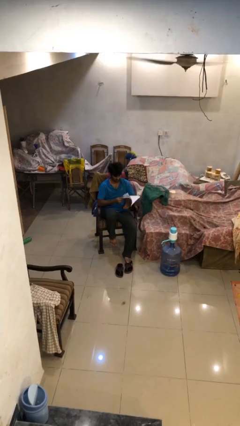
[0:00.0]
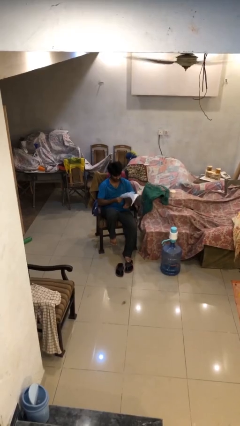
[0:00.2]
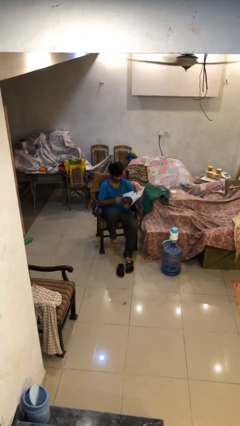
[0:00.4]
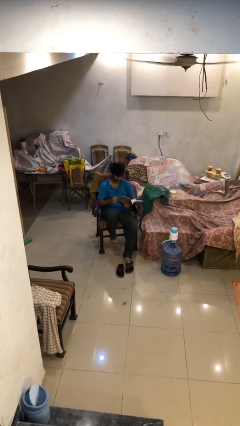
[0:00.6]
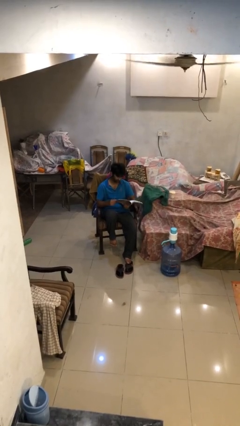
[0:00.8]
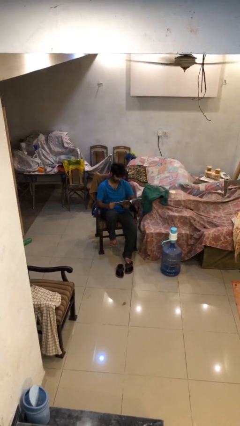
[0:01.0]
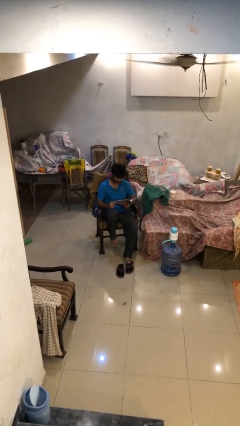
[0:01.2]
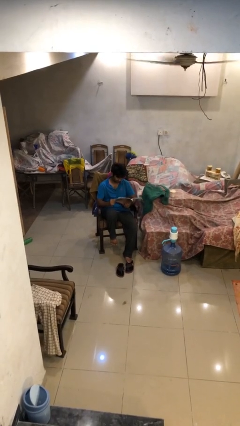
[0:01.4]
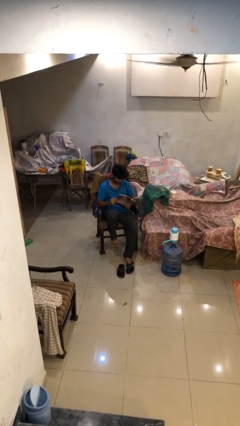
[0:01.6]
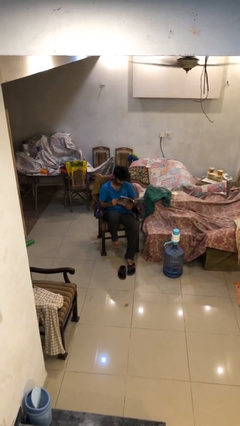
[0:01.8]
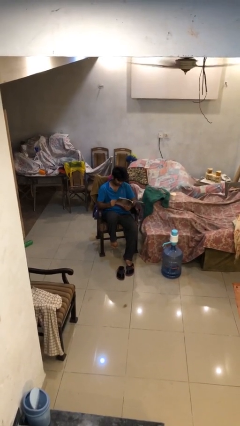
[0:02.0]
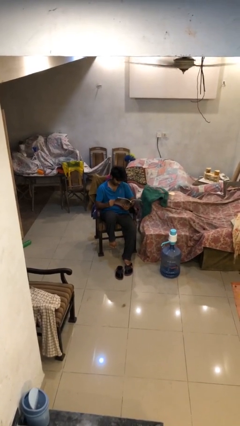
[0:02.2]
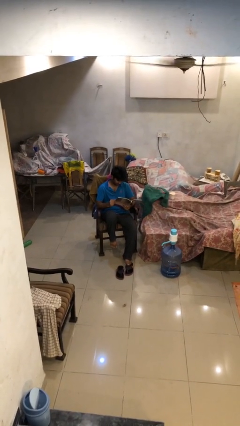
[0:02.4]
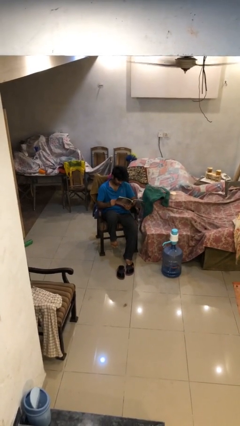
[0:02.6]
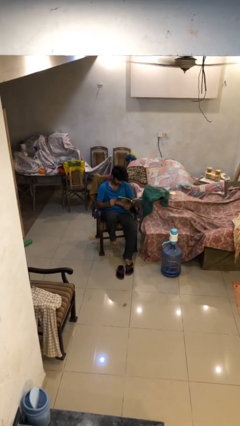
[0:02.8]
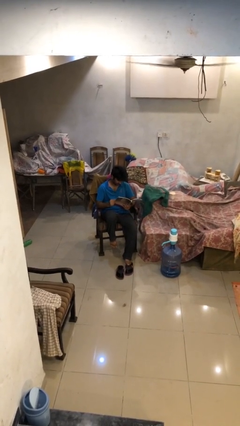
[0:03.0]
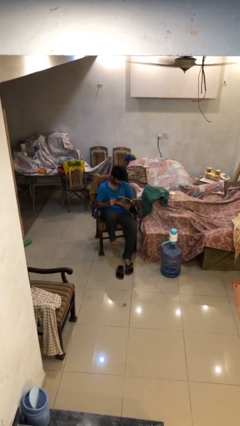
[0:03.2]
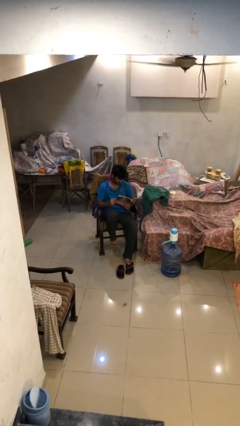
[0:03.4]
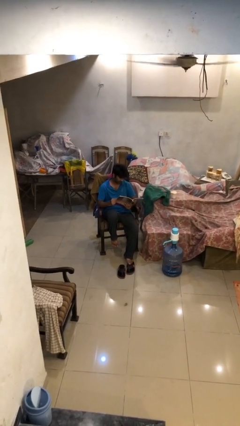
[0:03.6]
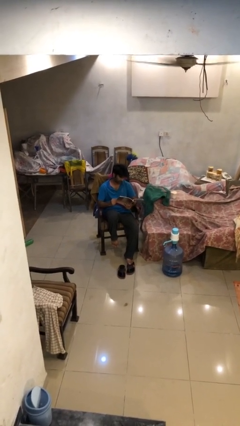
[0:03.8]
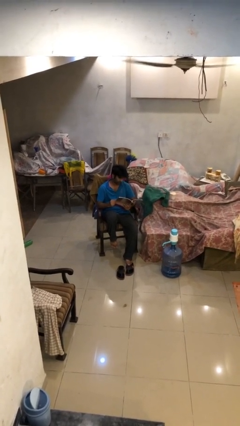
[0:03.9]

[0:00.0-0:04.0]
person reads document

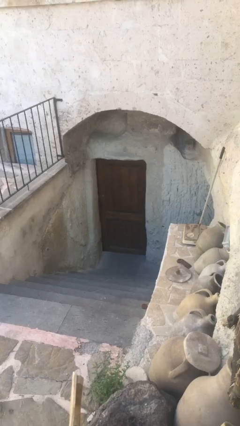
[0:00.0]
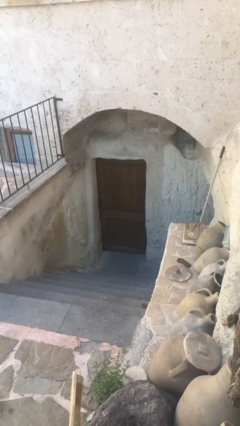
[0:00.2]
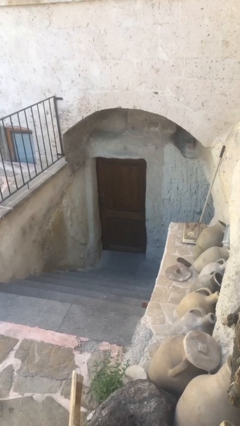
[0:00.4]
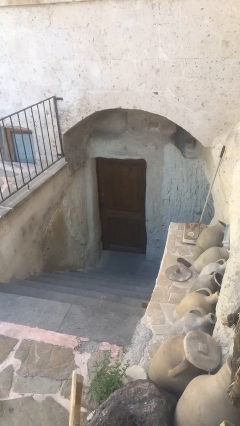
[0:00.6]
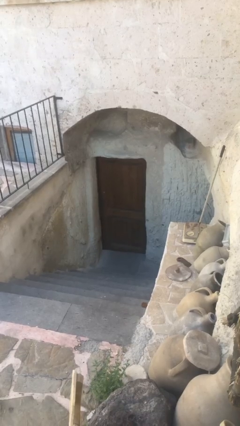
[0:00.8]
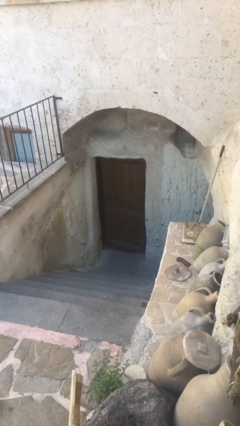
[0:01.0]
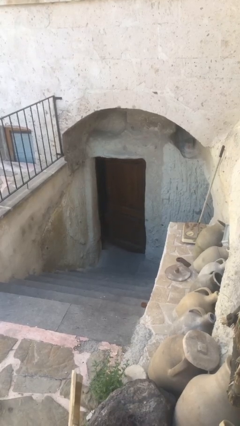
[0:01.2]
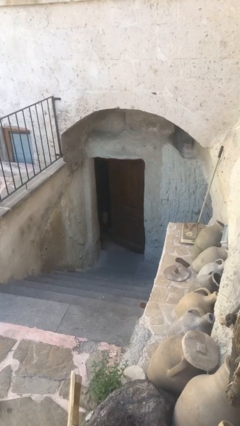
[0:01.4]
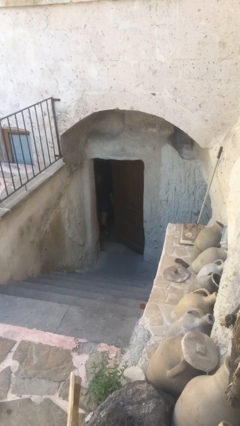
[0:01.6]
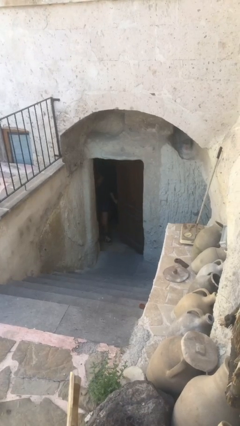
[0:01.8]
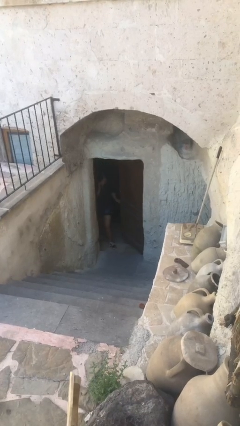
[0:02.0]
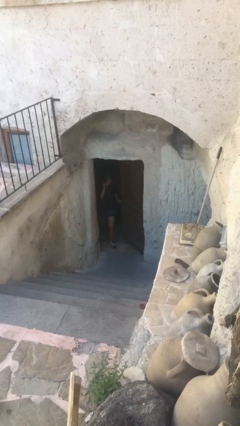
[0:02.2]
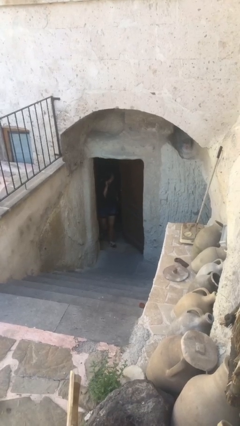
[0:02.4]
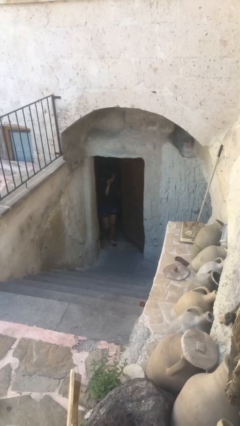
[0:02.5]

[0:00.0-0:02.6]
person opens facility door

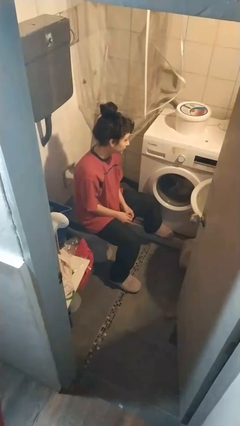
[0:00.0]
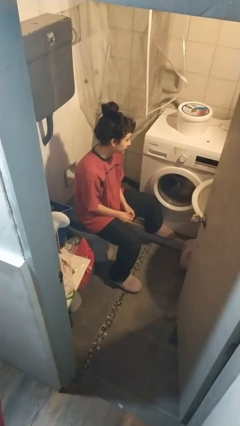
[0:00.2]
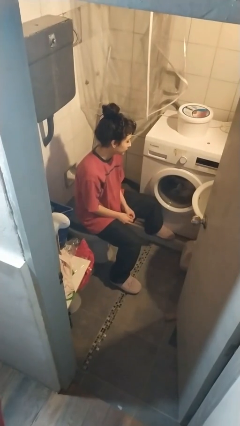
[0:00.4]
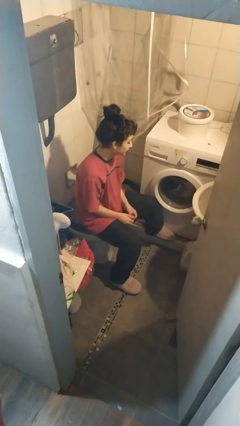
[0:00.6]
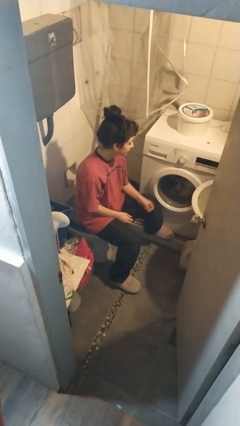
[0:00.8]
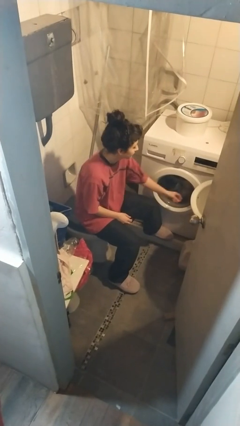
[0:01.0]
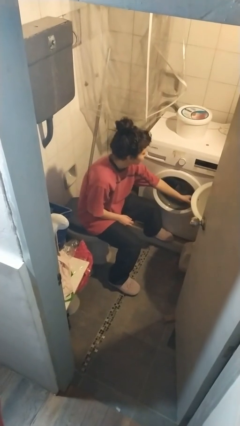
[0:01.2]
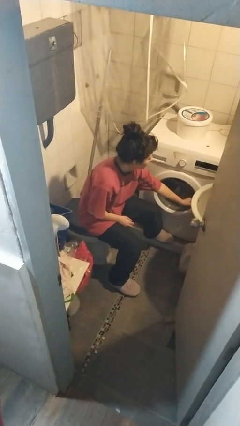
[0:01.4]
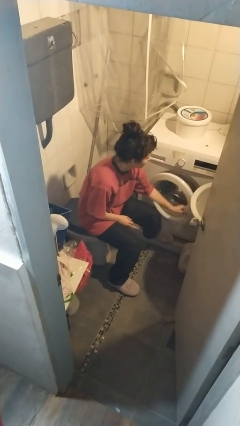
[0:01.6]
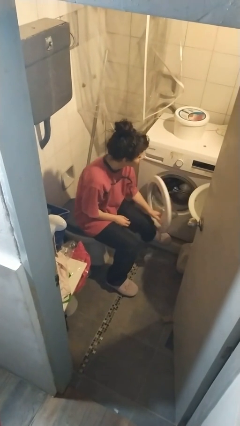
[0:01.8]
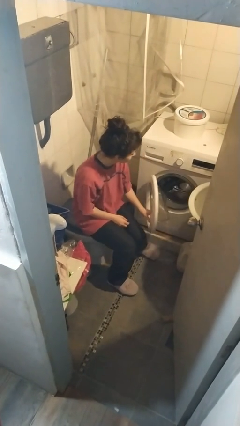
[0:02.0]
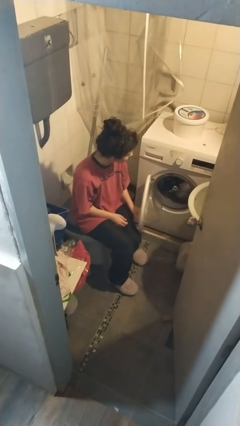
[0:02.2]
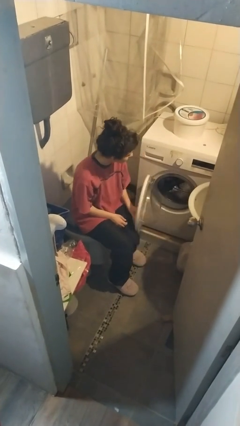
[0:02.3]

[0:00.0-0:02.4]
person opens clothes washer

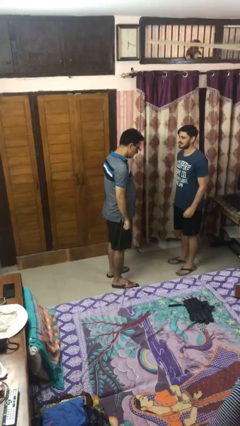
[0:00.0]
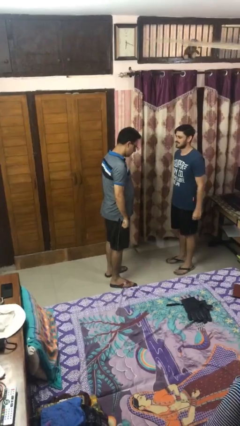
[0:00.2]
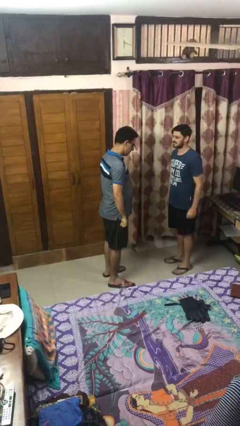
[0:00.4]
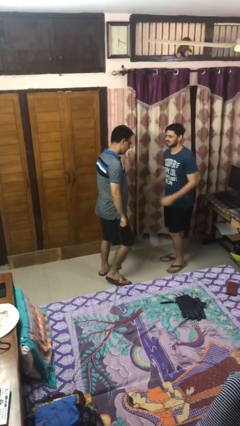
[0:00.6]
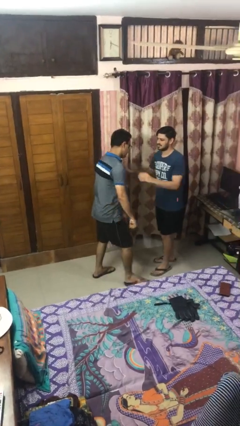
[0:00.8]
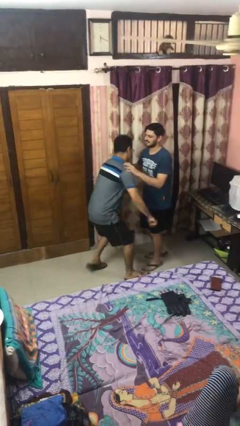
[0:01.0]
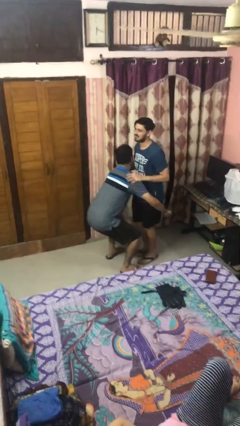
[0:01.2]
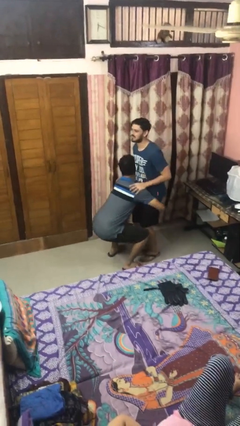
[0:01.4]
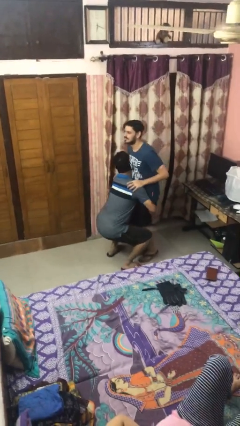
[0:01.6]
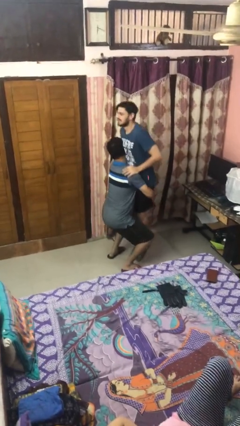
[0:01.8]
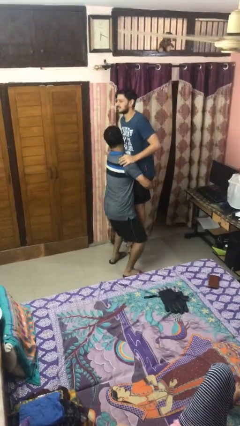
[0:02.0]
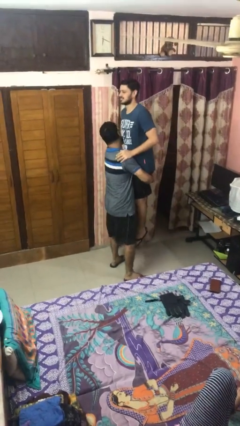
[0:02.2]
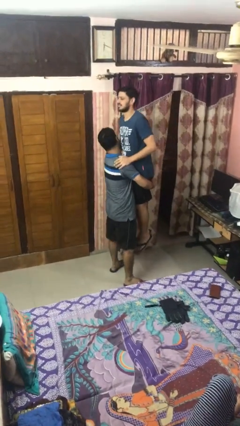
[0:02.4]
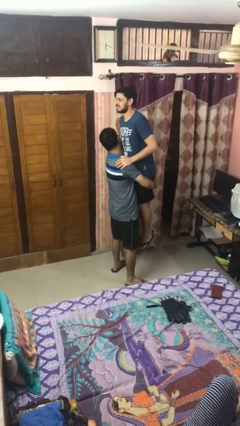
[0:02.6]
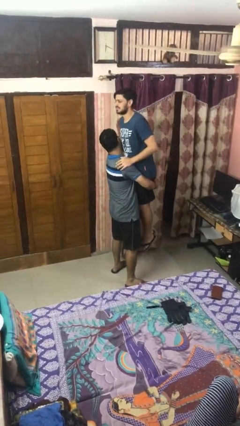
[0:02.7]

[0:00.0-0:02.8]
person picks up person

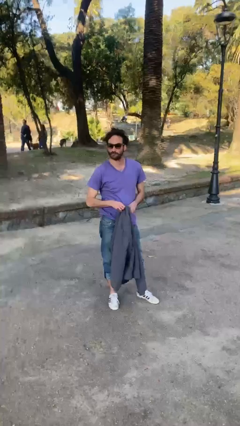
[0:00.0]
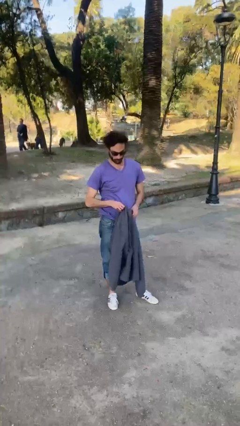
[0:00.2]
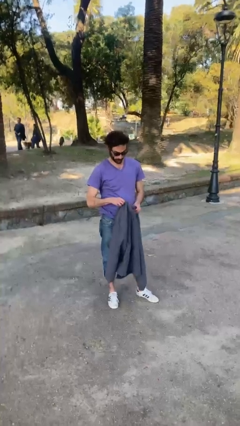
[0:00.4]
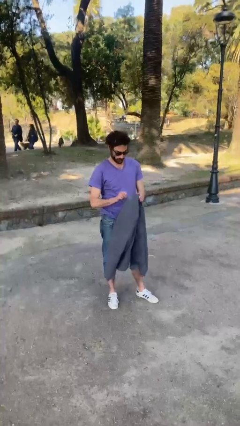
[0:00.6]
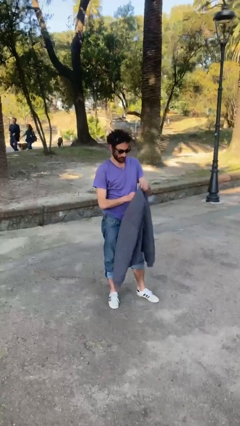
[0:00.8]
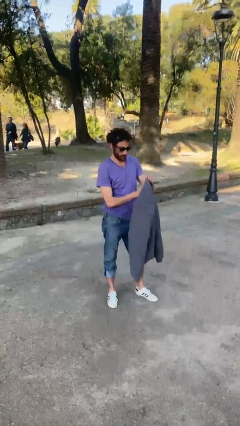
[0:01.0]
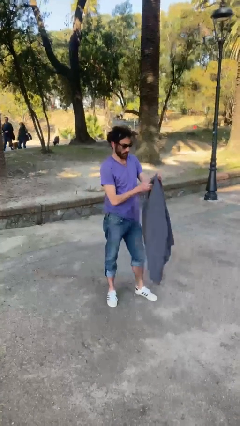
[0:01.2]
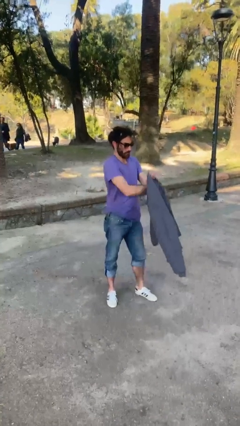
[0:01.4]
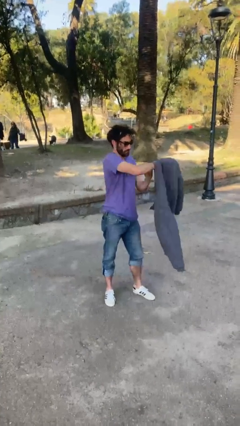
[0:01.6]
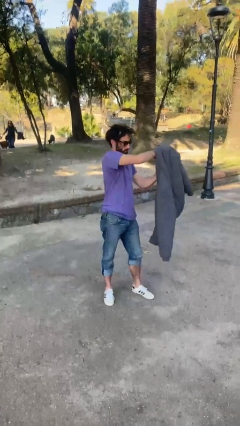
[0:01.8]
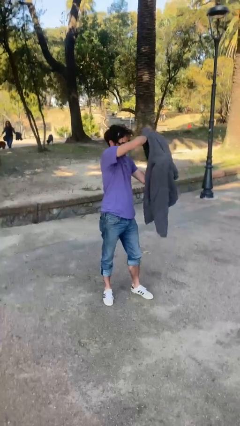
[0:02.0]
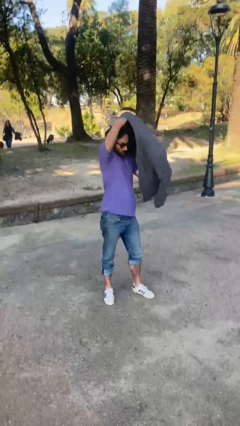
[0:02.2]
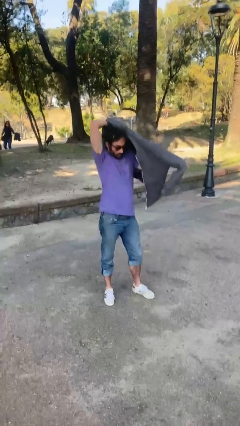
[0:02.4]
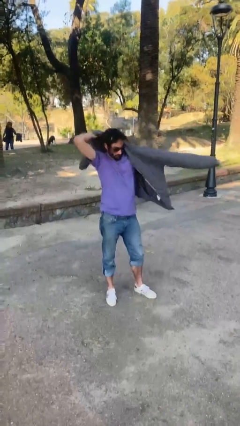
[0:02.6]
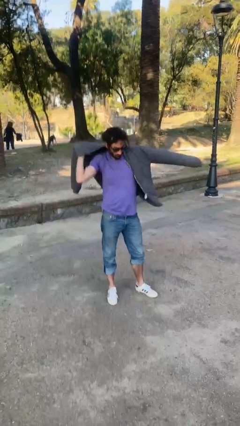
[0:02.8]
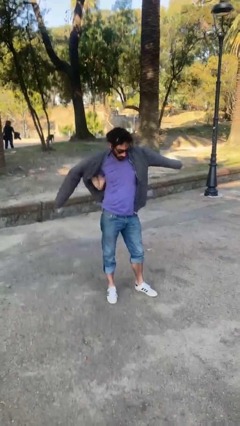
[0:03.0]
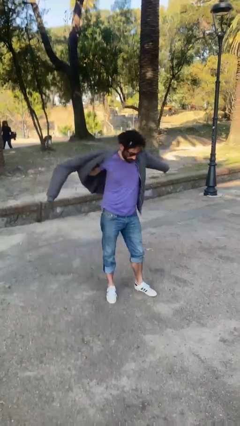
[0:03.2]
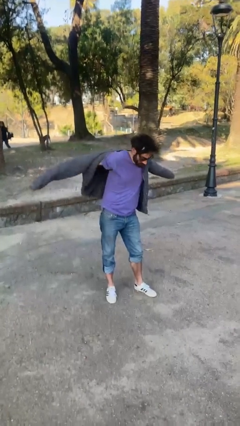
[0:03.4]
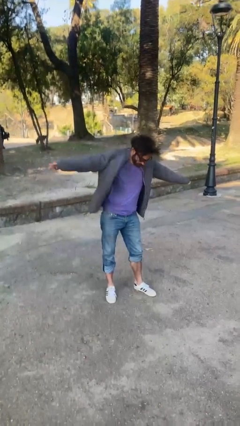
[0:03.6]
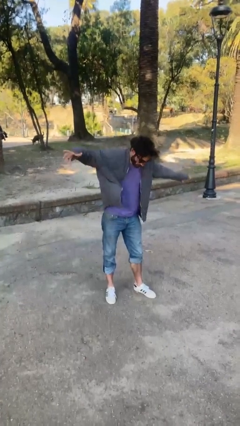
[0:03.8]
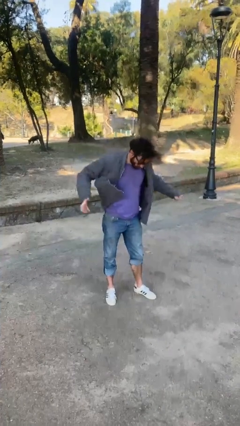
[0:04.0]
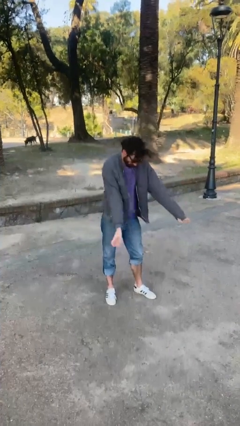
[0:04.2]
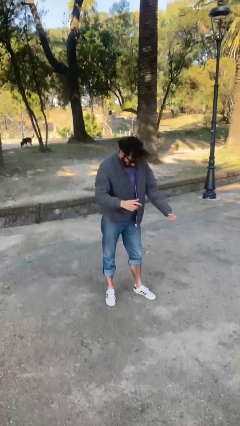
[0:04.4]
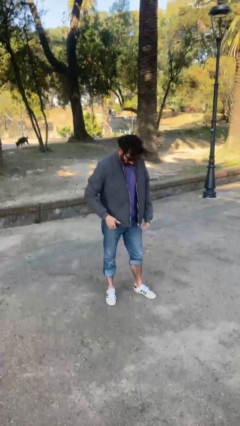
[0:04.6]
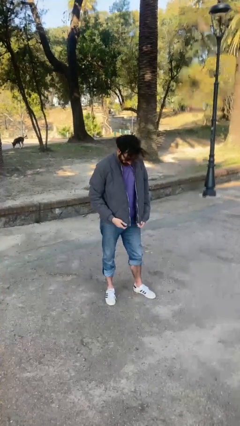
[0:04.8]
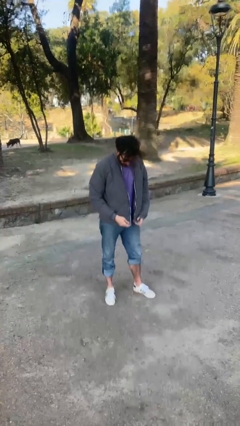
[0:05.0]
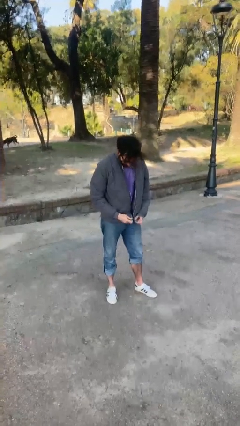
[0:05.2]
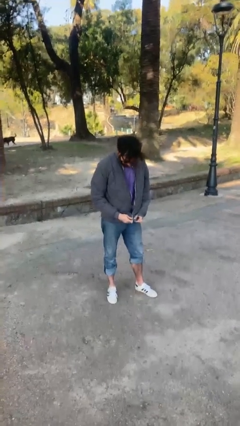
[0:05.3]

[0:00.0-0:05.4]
person puts on jacket
